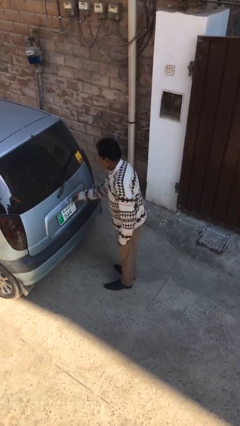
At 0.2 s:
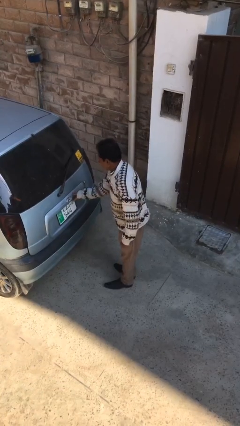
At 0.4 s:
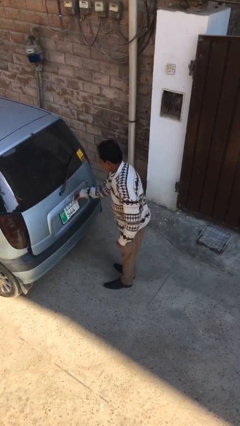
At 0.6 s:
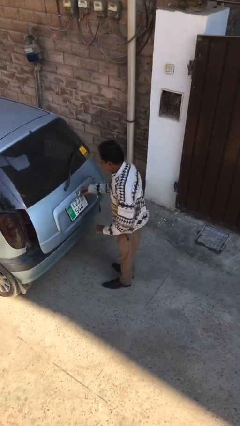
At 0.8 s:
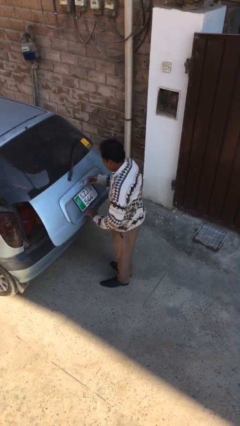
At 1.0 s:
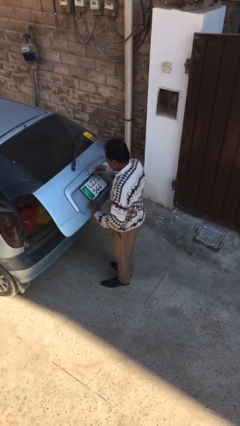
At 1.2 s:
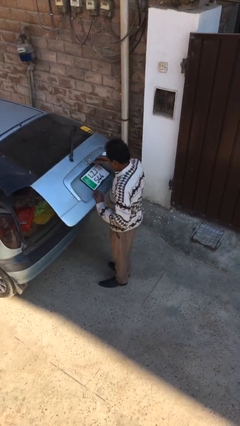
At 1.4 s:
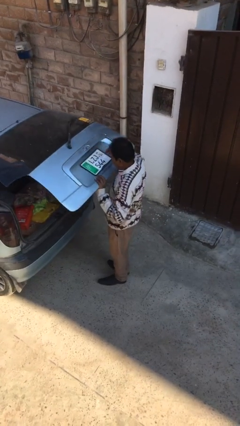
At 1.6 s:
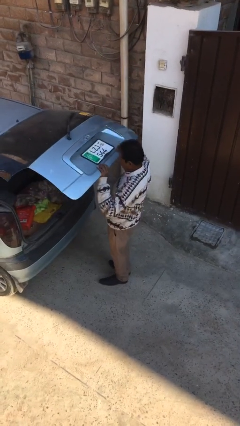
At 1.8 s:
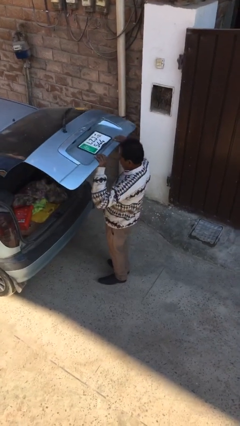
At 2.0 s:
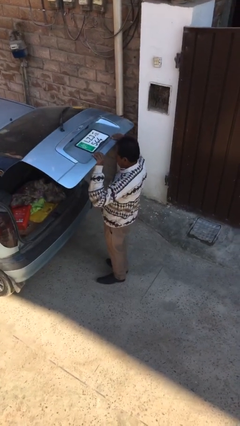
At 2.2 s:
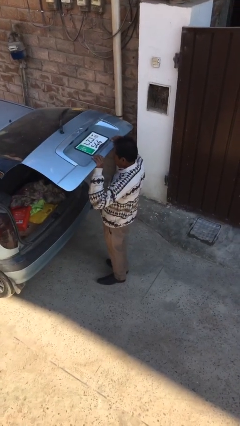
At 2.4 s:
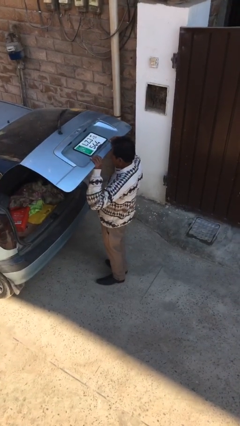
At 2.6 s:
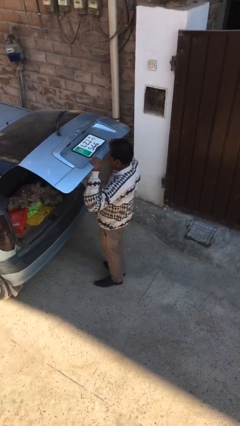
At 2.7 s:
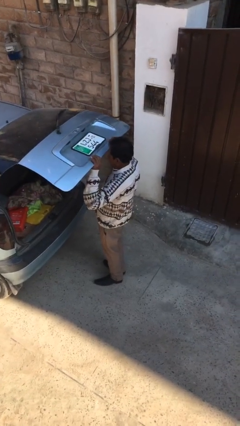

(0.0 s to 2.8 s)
person opens car trunk

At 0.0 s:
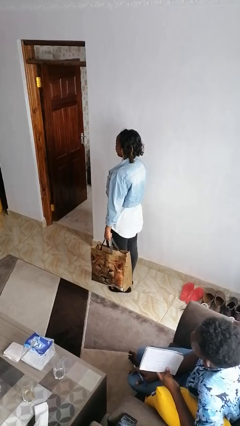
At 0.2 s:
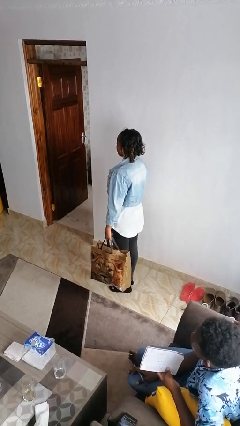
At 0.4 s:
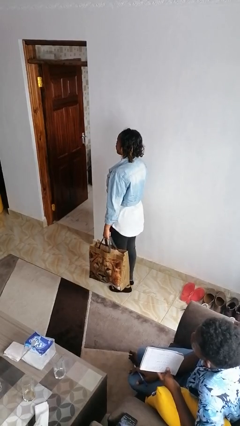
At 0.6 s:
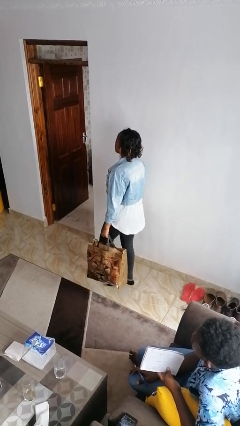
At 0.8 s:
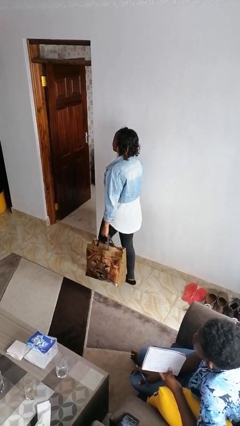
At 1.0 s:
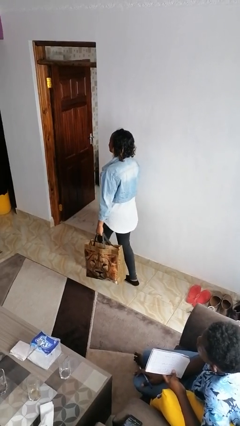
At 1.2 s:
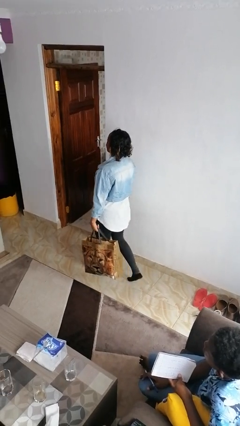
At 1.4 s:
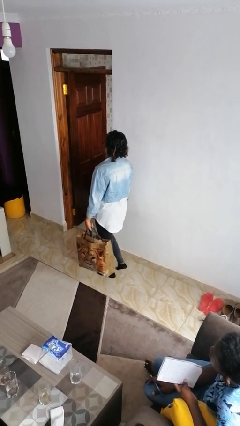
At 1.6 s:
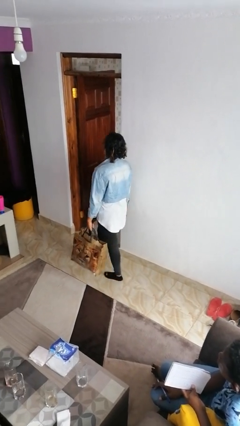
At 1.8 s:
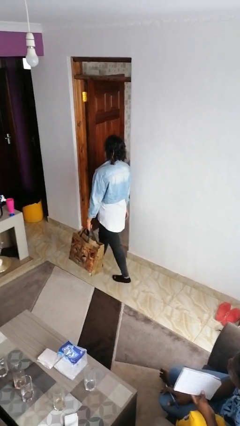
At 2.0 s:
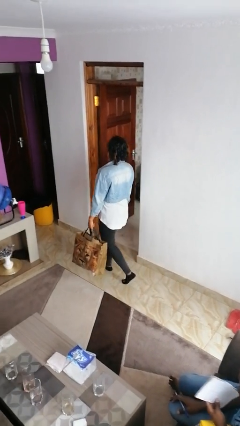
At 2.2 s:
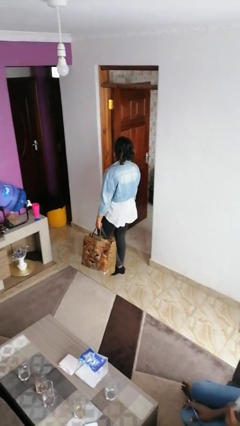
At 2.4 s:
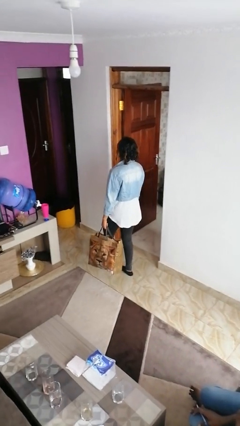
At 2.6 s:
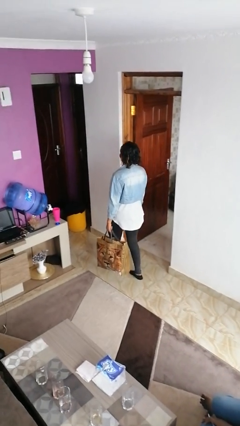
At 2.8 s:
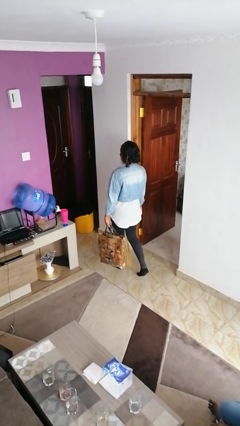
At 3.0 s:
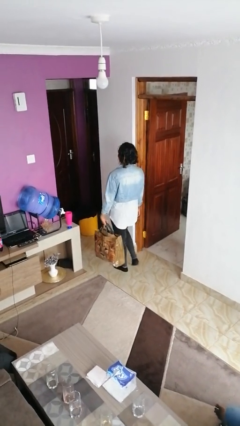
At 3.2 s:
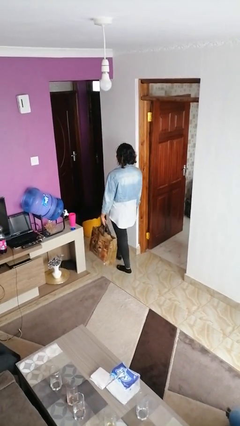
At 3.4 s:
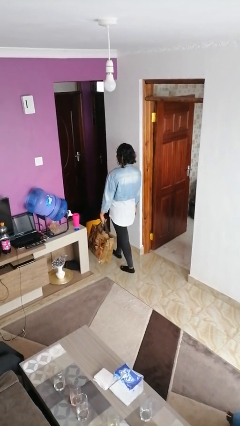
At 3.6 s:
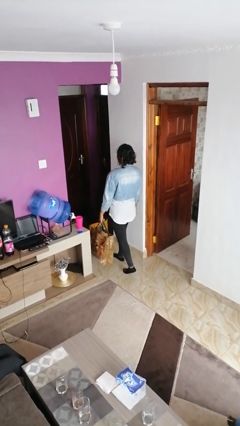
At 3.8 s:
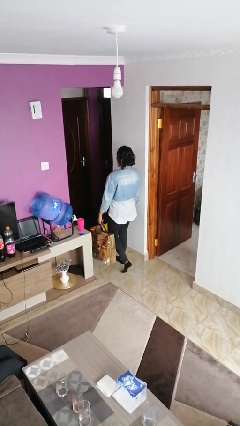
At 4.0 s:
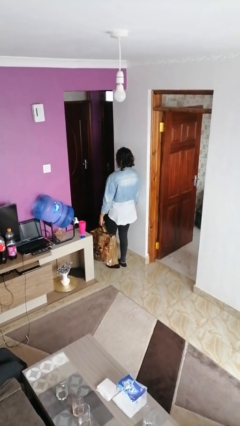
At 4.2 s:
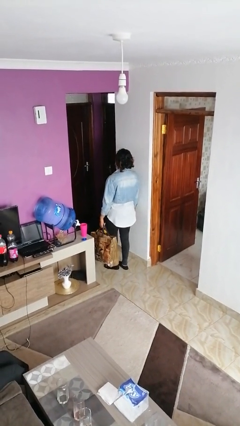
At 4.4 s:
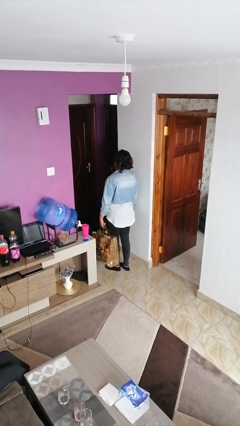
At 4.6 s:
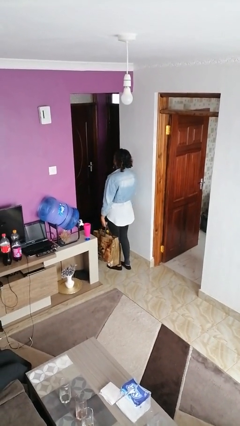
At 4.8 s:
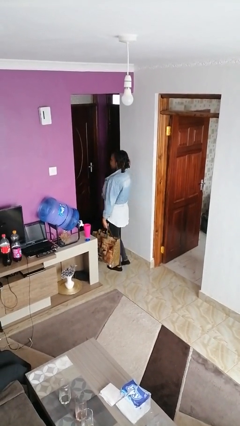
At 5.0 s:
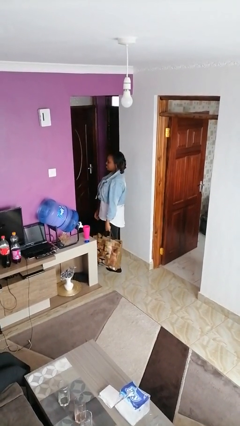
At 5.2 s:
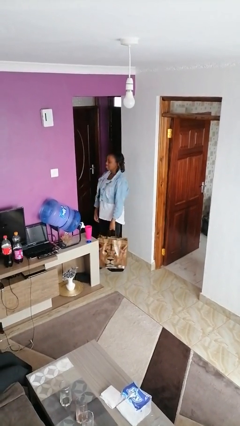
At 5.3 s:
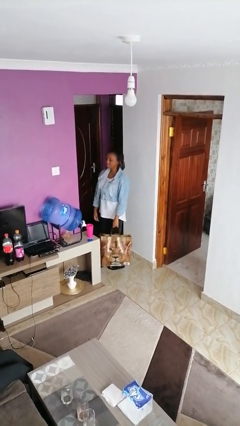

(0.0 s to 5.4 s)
person carries groceries

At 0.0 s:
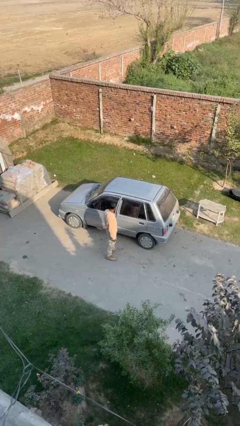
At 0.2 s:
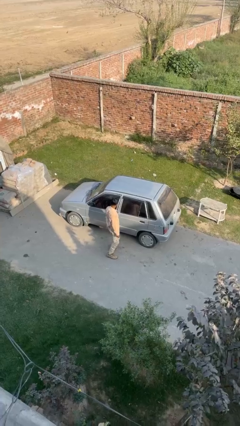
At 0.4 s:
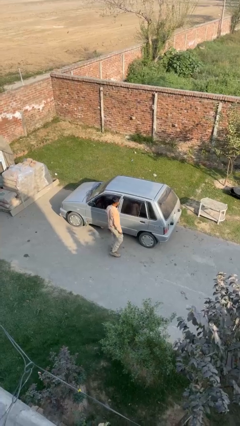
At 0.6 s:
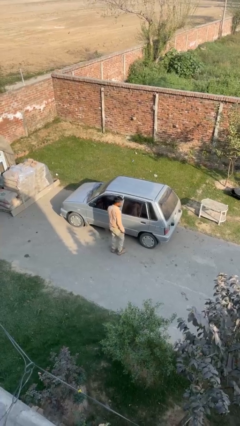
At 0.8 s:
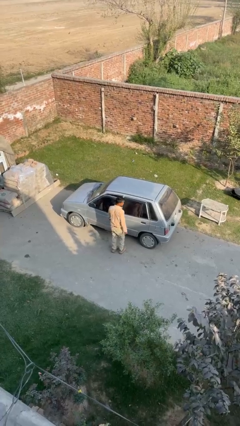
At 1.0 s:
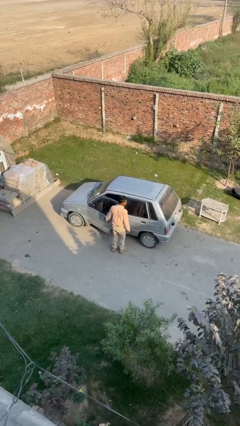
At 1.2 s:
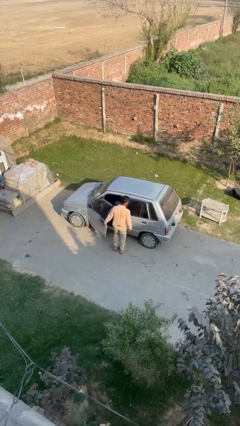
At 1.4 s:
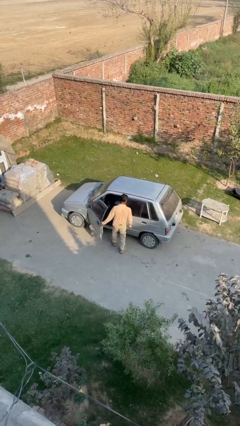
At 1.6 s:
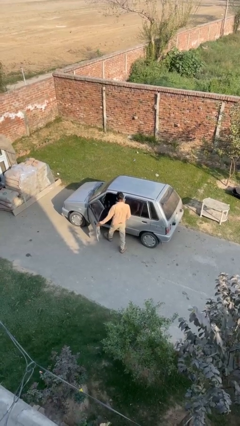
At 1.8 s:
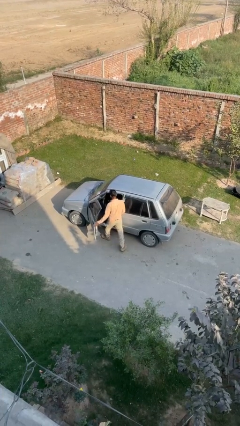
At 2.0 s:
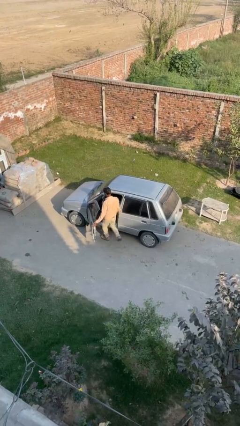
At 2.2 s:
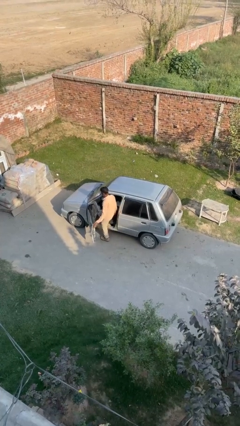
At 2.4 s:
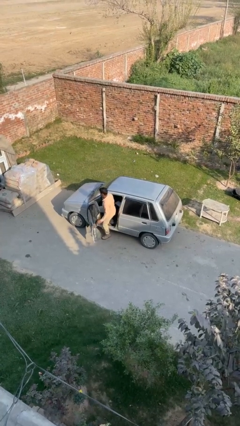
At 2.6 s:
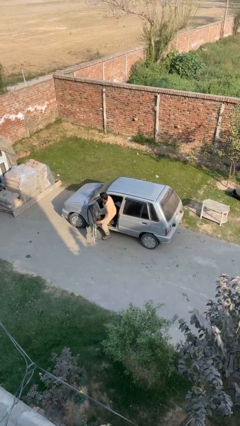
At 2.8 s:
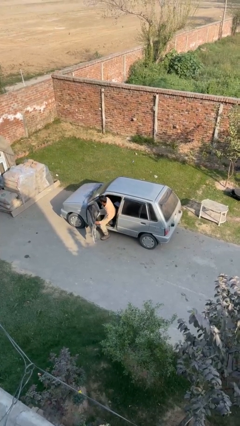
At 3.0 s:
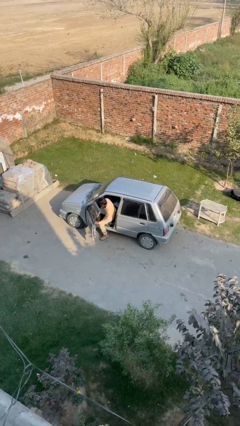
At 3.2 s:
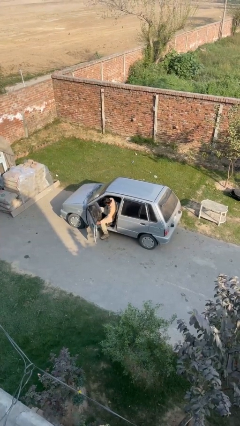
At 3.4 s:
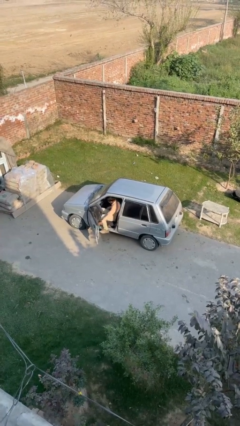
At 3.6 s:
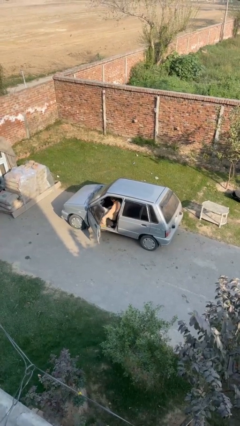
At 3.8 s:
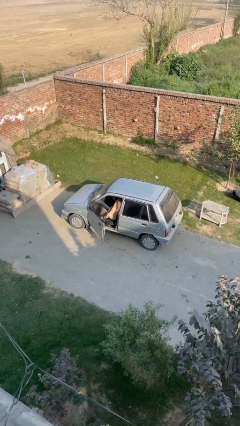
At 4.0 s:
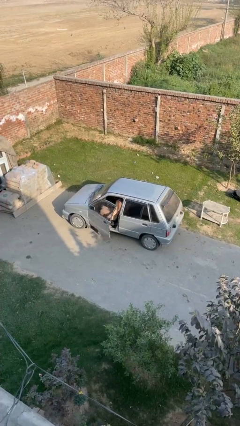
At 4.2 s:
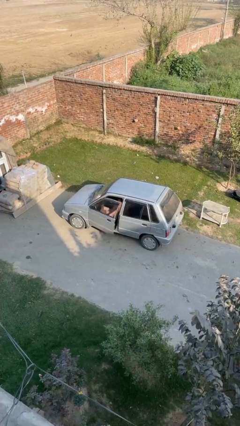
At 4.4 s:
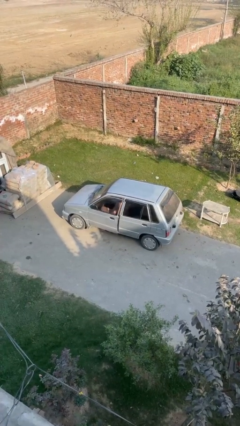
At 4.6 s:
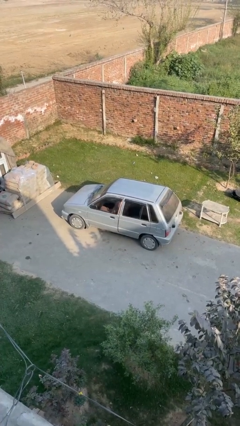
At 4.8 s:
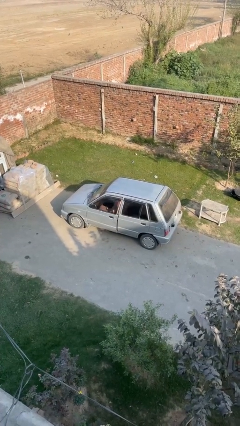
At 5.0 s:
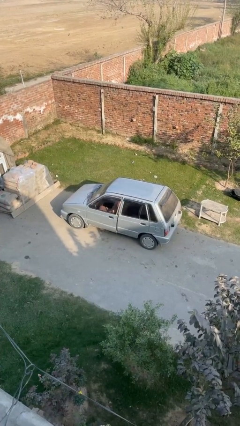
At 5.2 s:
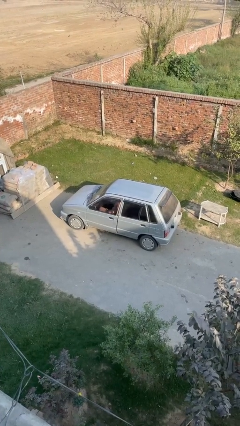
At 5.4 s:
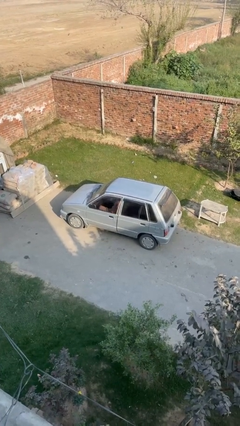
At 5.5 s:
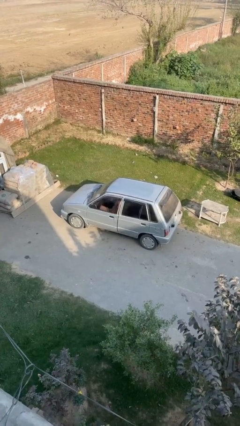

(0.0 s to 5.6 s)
car picks up person

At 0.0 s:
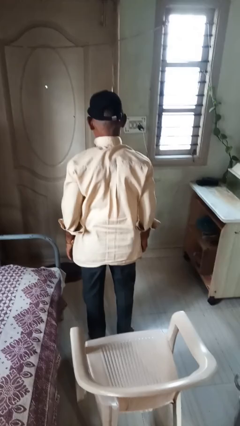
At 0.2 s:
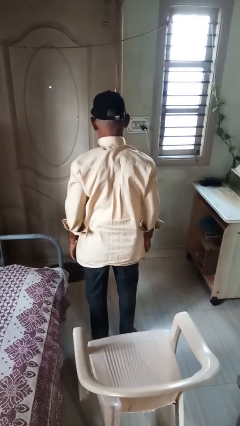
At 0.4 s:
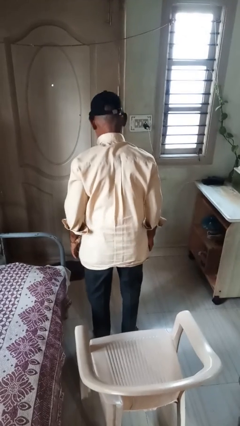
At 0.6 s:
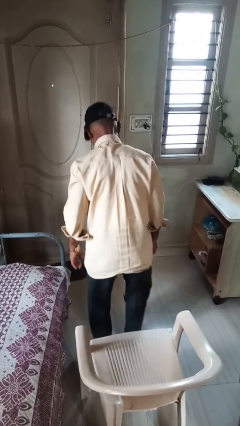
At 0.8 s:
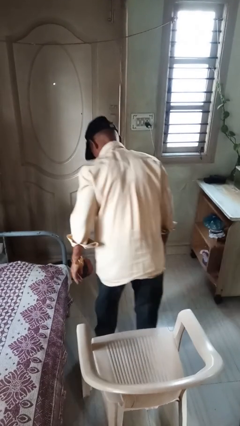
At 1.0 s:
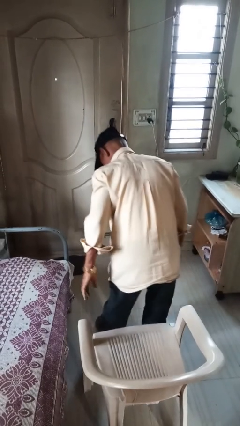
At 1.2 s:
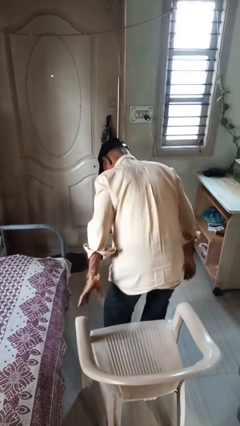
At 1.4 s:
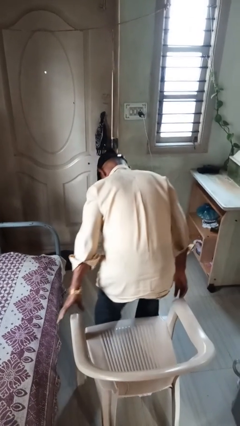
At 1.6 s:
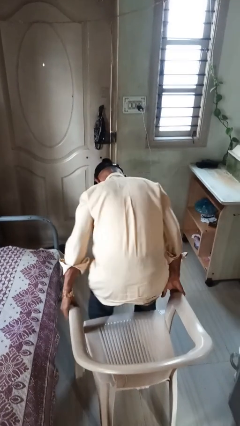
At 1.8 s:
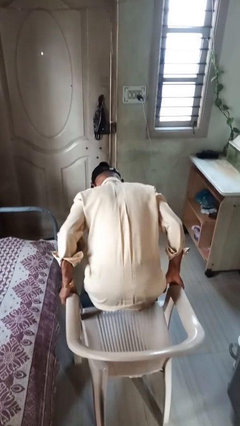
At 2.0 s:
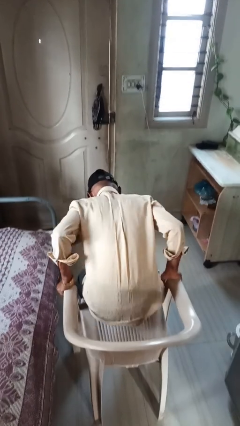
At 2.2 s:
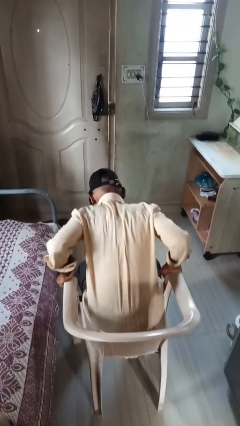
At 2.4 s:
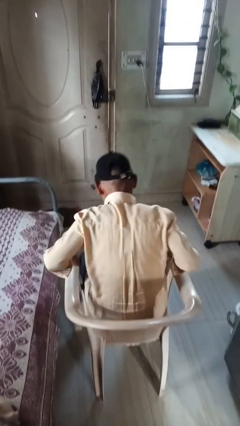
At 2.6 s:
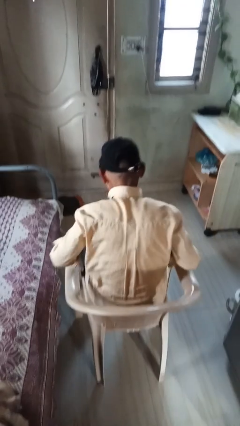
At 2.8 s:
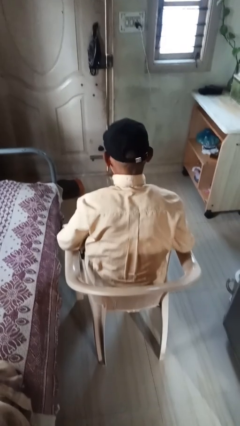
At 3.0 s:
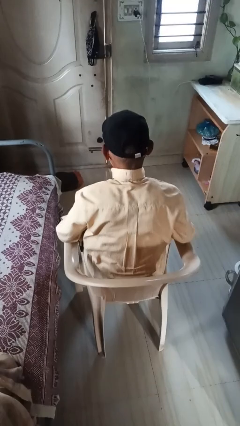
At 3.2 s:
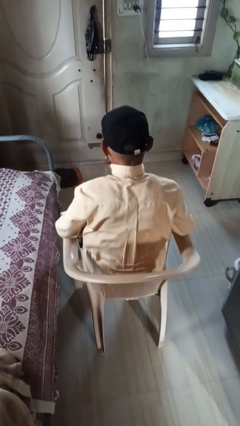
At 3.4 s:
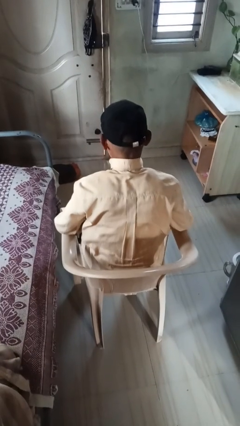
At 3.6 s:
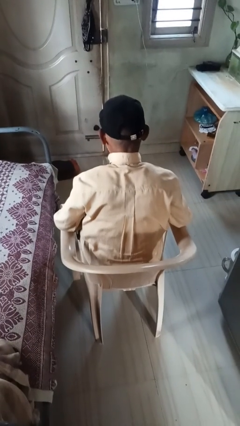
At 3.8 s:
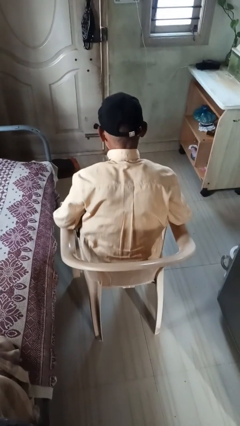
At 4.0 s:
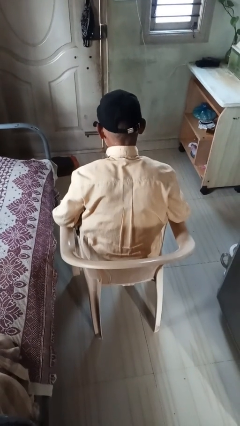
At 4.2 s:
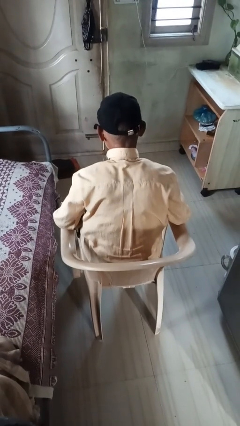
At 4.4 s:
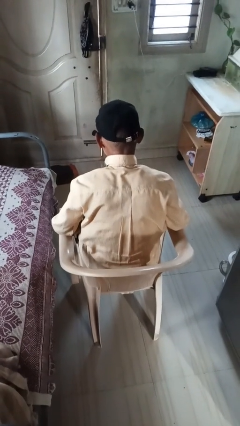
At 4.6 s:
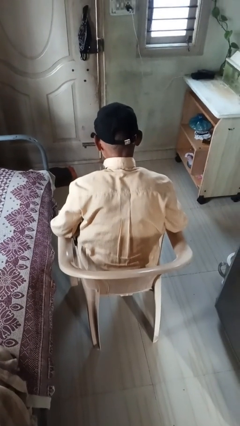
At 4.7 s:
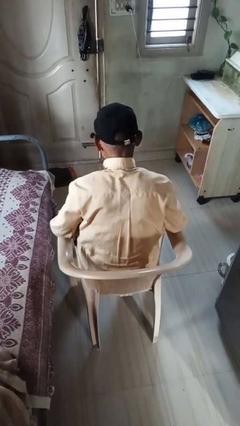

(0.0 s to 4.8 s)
person sits down
